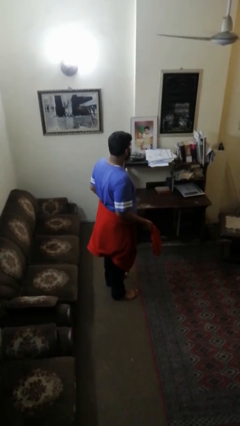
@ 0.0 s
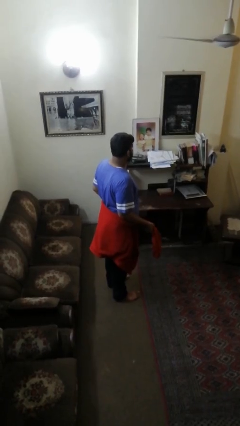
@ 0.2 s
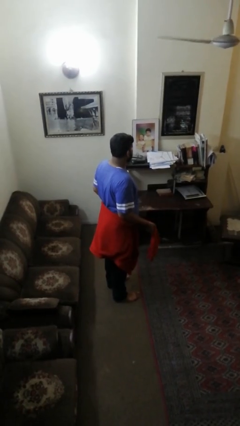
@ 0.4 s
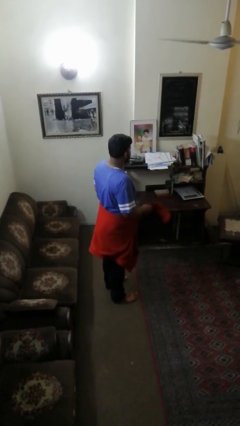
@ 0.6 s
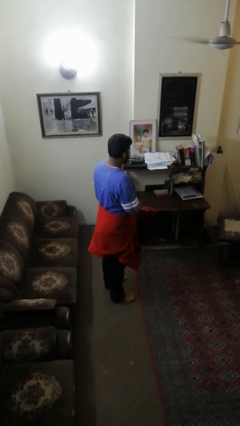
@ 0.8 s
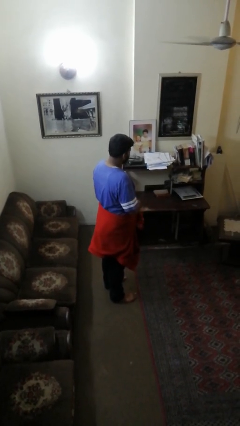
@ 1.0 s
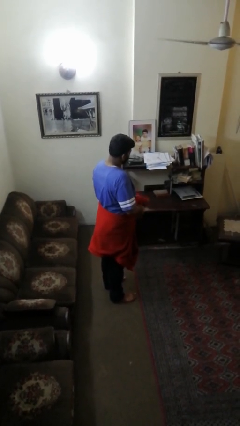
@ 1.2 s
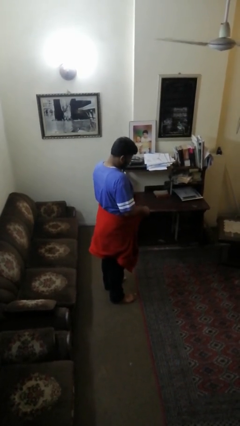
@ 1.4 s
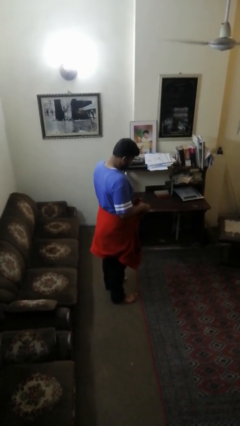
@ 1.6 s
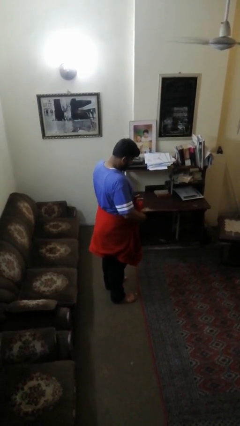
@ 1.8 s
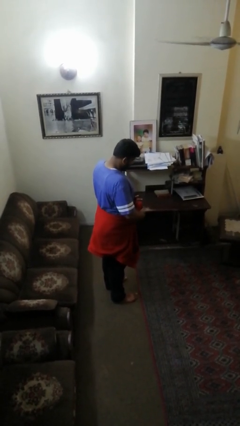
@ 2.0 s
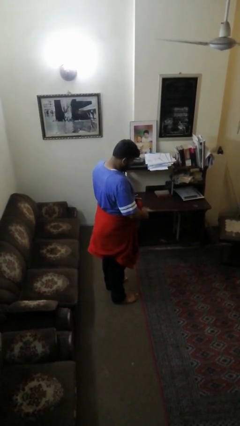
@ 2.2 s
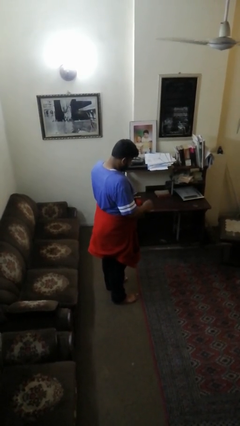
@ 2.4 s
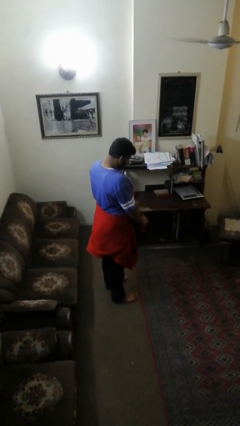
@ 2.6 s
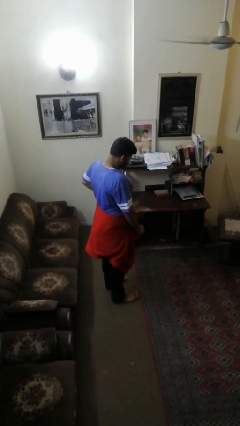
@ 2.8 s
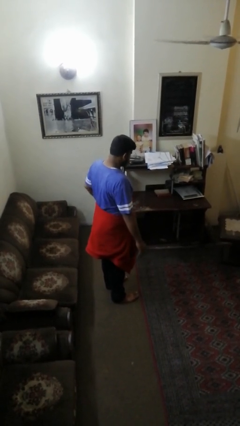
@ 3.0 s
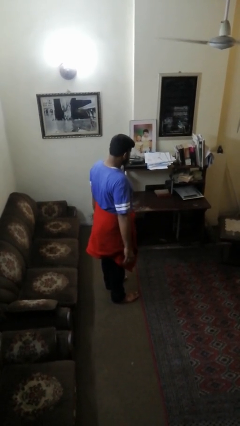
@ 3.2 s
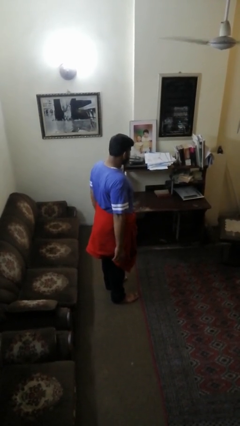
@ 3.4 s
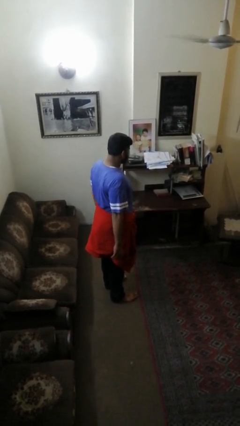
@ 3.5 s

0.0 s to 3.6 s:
person ties jacket around waist

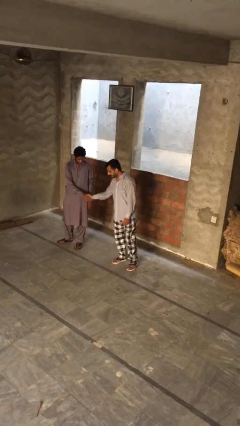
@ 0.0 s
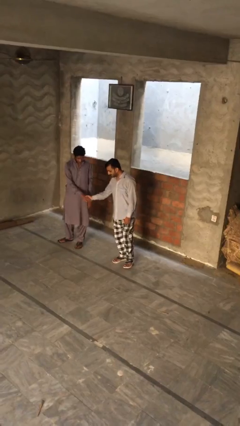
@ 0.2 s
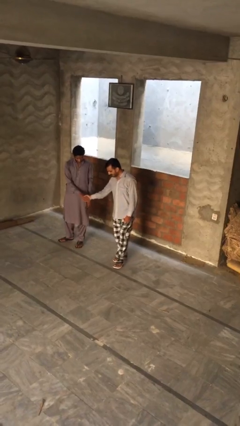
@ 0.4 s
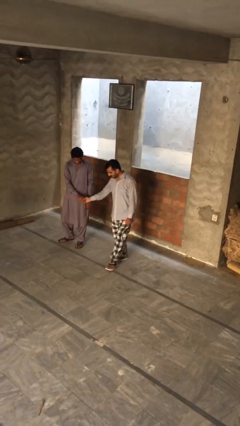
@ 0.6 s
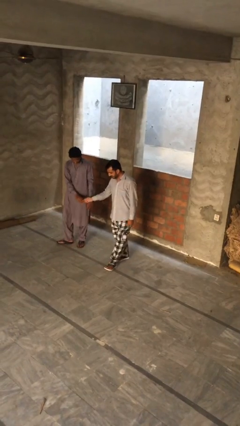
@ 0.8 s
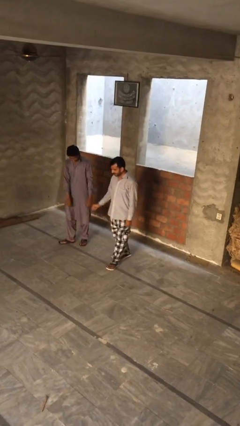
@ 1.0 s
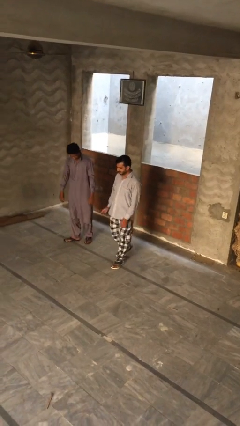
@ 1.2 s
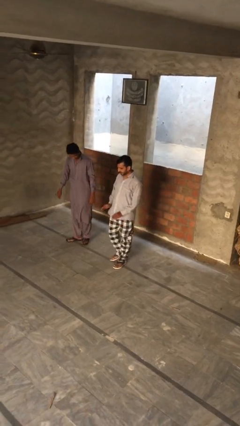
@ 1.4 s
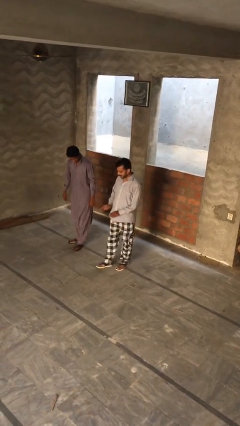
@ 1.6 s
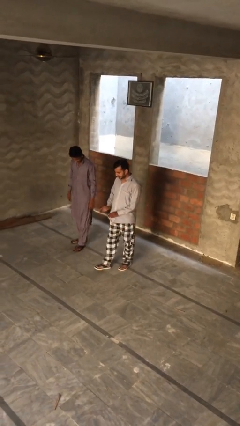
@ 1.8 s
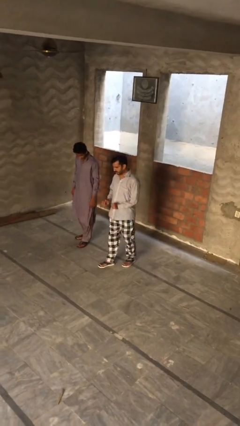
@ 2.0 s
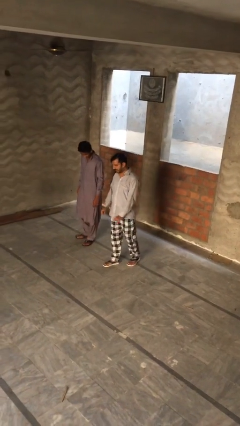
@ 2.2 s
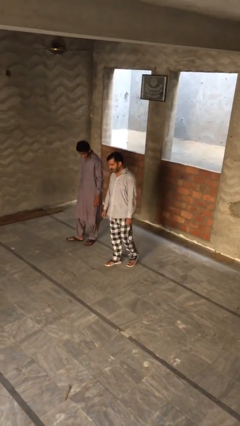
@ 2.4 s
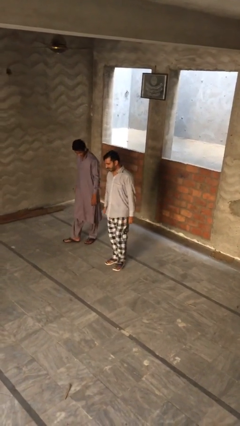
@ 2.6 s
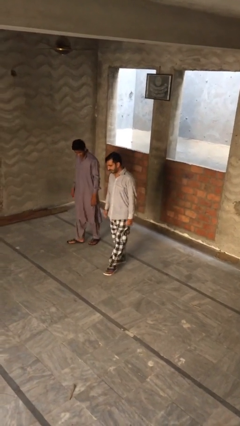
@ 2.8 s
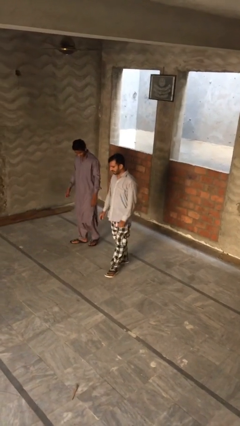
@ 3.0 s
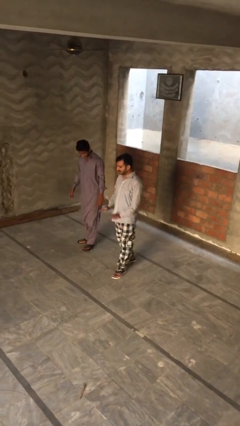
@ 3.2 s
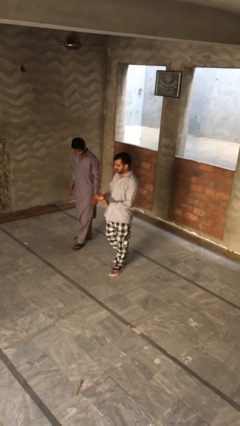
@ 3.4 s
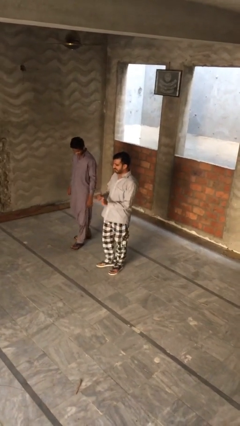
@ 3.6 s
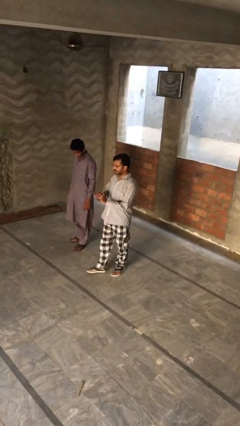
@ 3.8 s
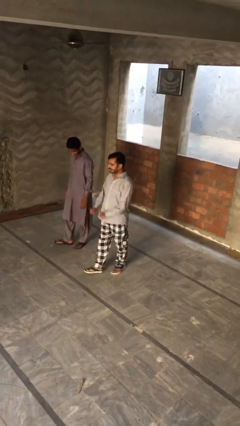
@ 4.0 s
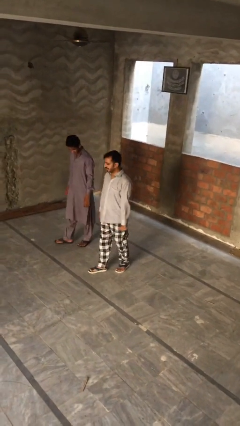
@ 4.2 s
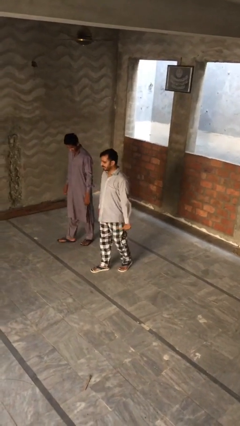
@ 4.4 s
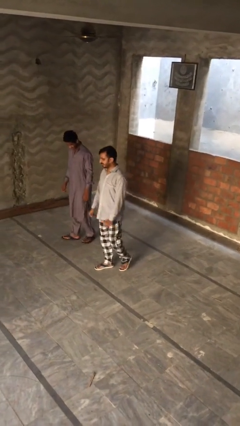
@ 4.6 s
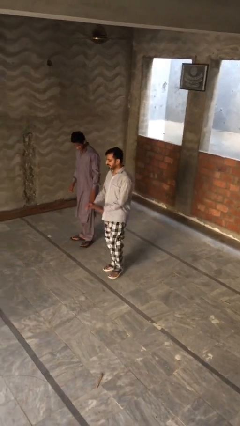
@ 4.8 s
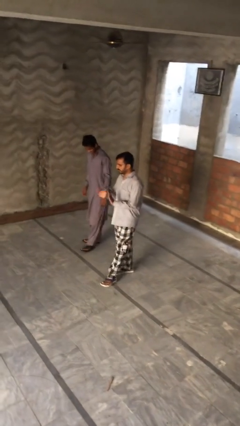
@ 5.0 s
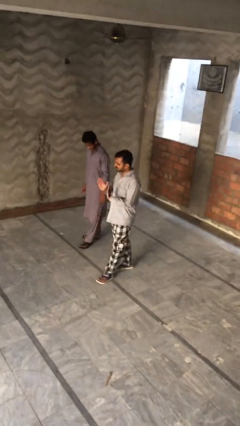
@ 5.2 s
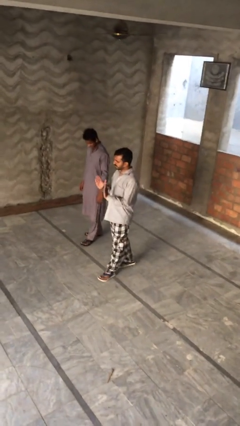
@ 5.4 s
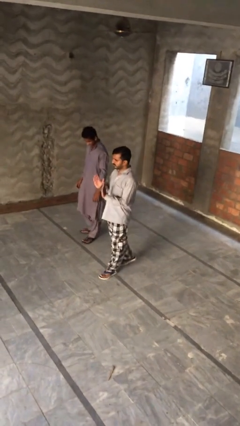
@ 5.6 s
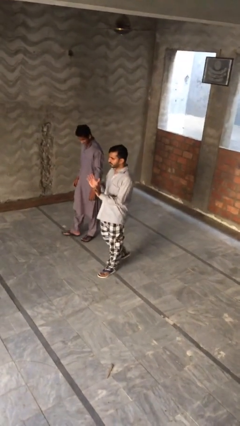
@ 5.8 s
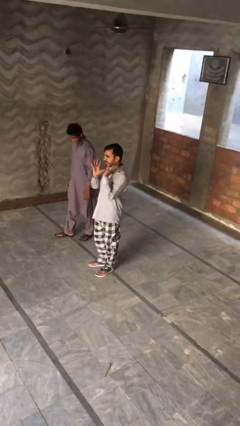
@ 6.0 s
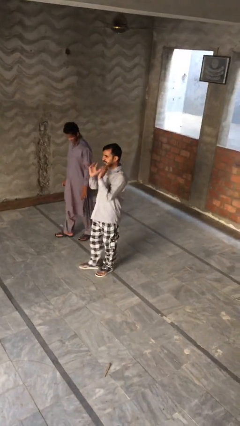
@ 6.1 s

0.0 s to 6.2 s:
person talks to person

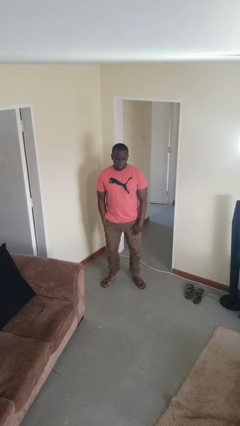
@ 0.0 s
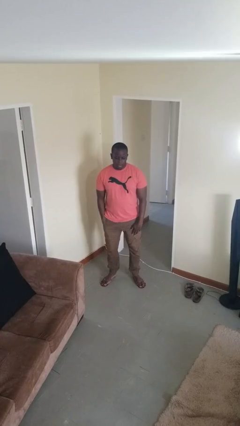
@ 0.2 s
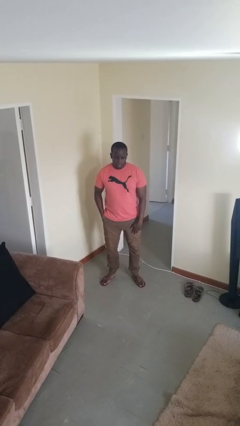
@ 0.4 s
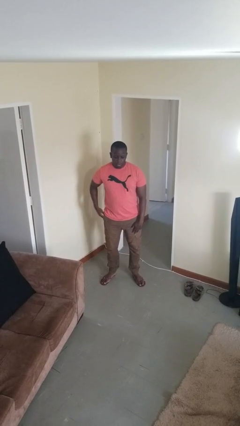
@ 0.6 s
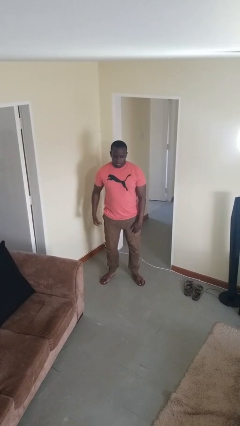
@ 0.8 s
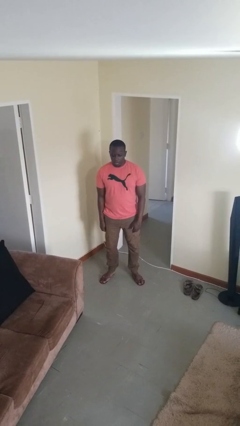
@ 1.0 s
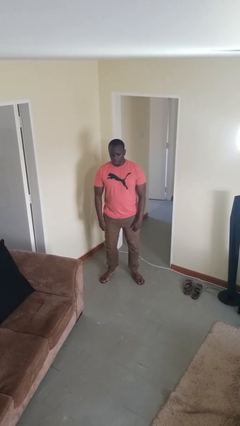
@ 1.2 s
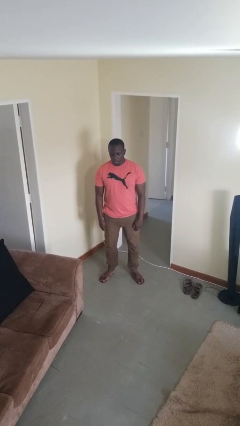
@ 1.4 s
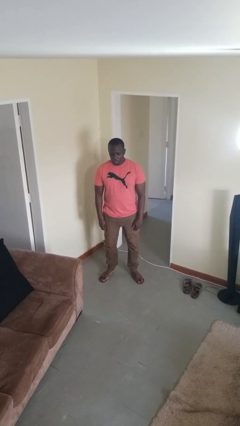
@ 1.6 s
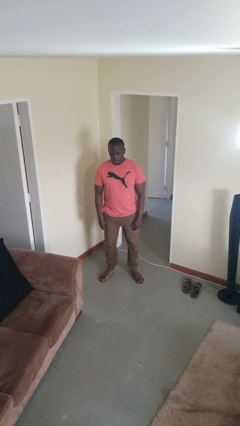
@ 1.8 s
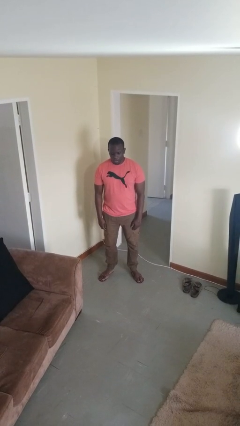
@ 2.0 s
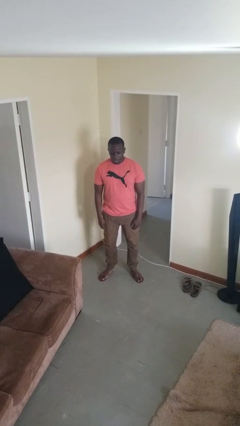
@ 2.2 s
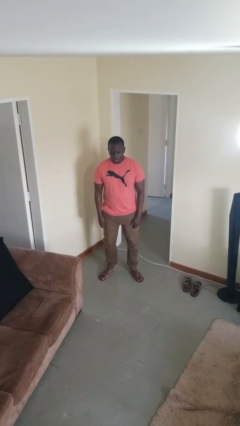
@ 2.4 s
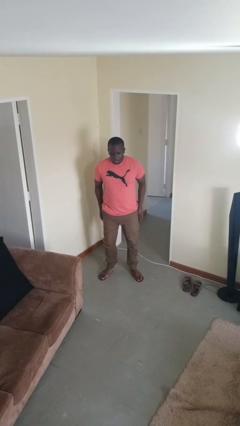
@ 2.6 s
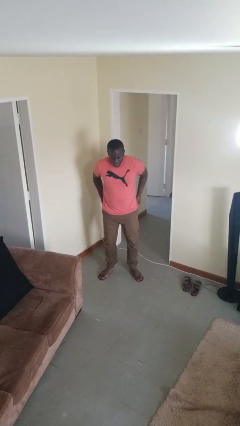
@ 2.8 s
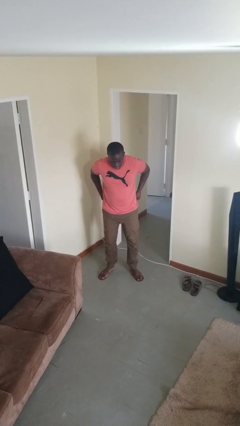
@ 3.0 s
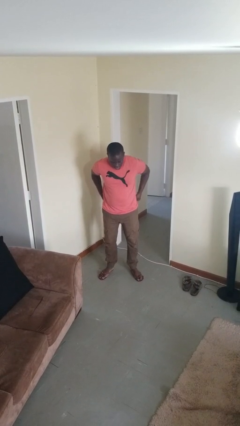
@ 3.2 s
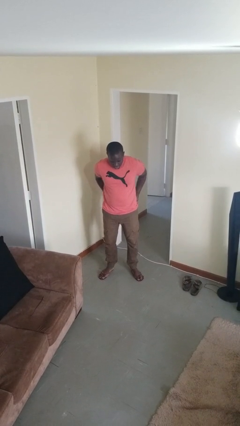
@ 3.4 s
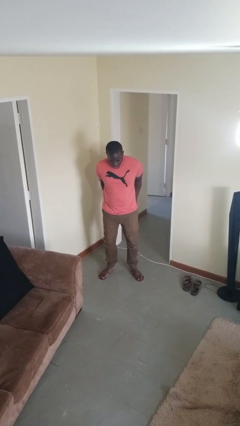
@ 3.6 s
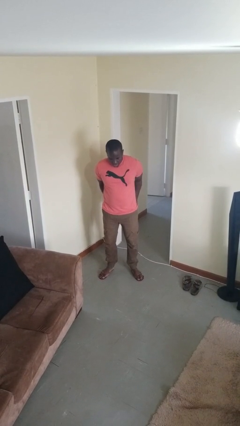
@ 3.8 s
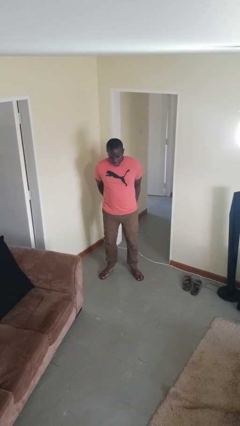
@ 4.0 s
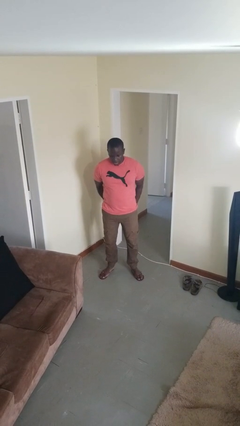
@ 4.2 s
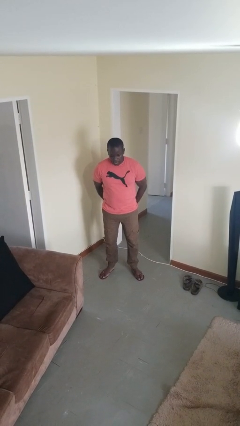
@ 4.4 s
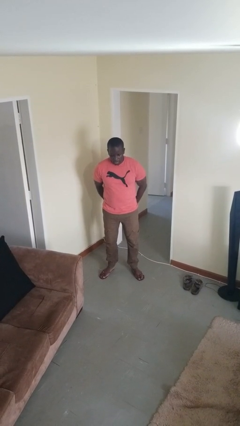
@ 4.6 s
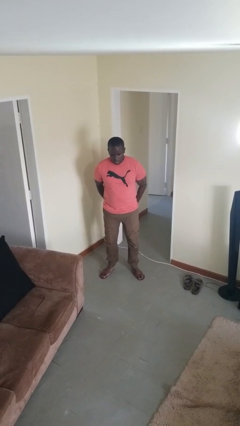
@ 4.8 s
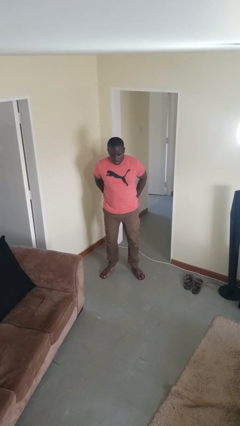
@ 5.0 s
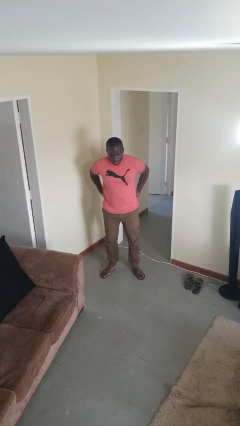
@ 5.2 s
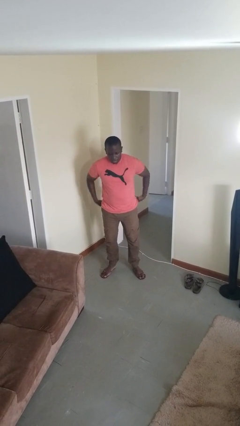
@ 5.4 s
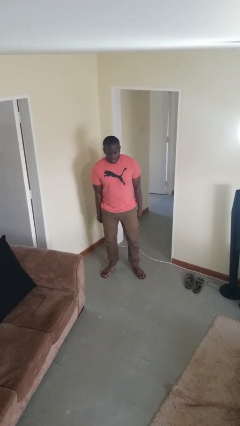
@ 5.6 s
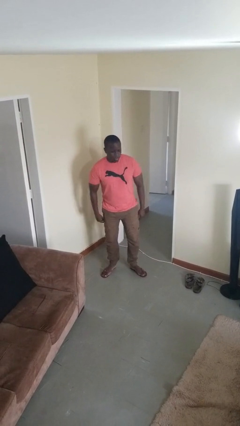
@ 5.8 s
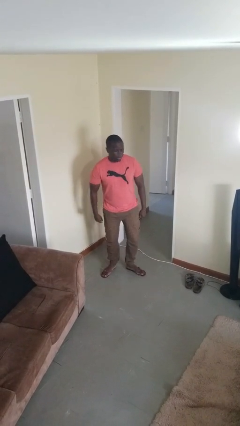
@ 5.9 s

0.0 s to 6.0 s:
person puts hands in back pockets

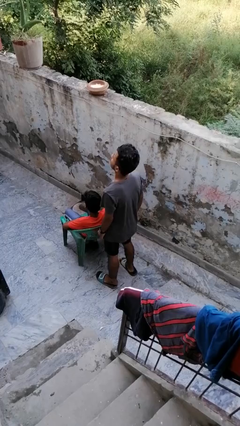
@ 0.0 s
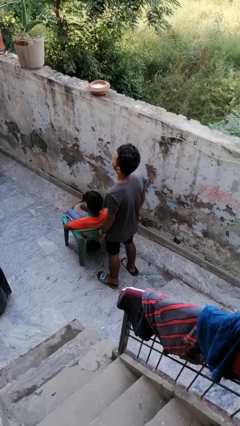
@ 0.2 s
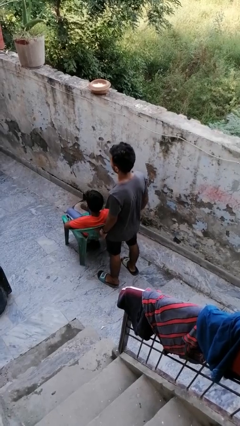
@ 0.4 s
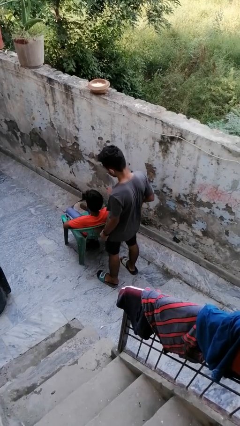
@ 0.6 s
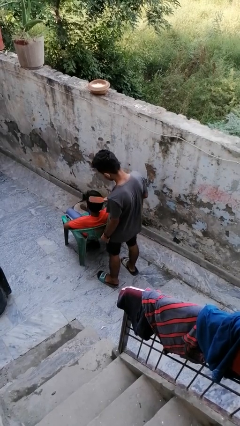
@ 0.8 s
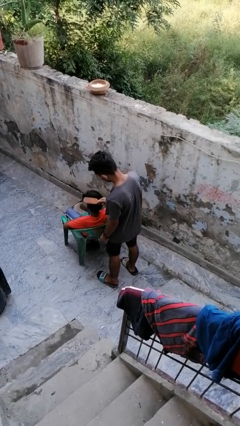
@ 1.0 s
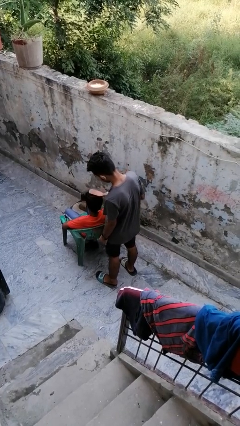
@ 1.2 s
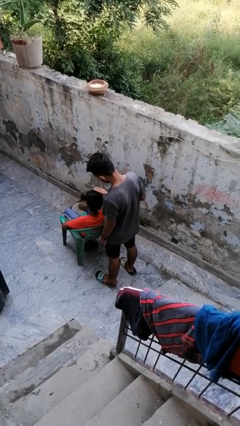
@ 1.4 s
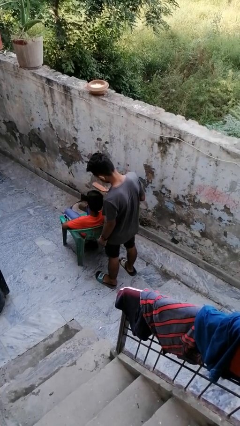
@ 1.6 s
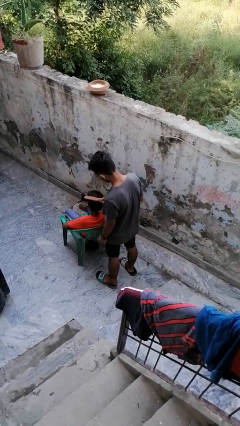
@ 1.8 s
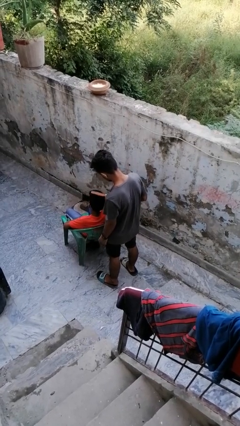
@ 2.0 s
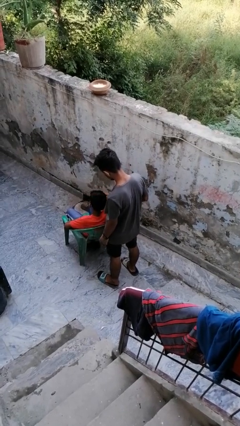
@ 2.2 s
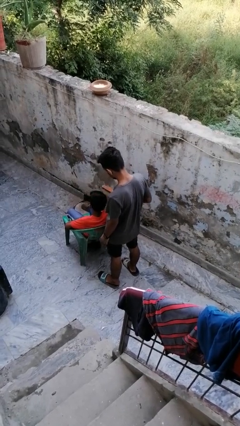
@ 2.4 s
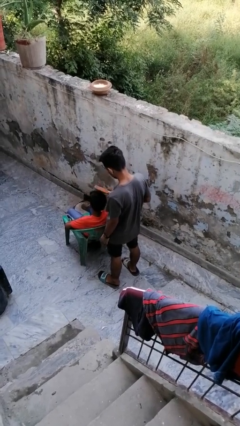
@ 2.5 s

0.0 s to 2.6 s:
person brushes hair of person
